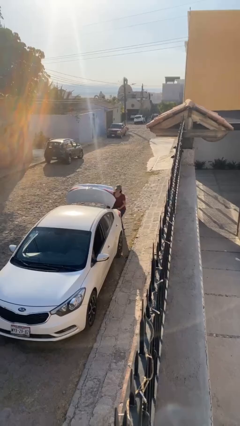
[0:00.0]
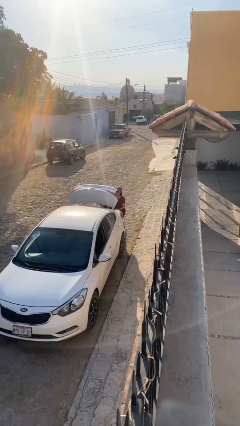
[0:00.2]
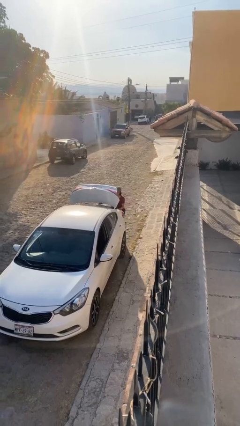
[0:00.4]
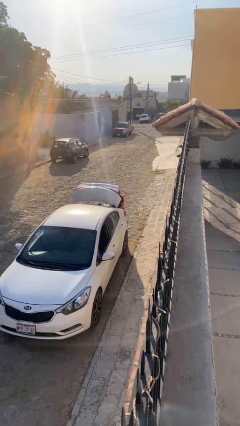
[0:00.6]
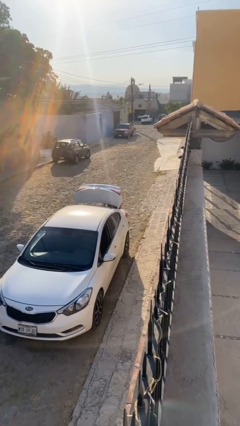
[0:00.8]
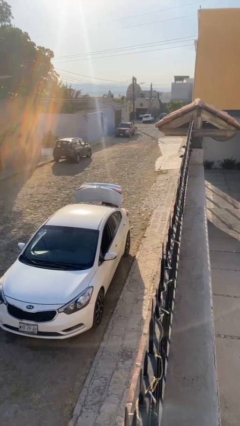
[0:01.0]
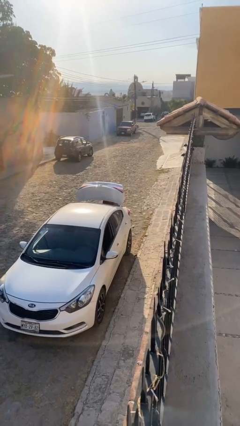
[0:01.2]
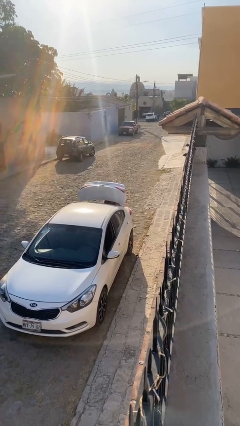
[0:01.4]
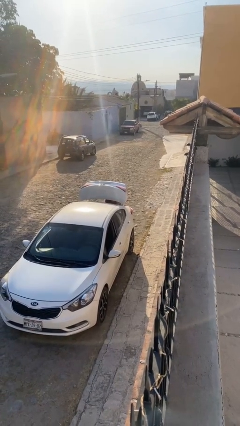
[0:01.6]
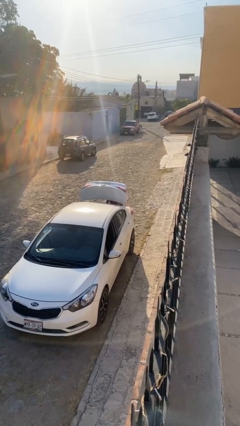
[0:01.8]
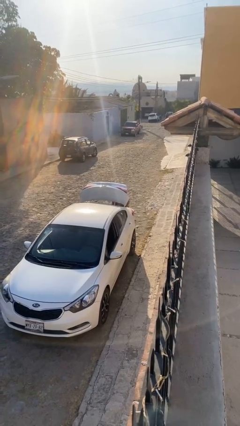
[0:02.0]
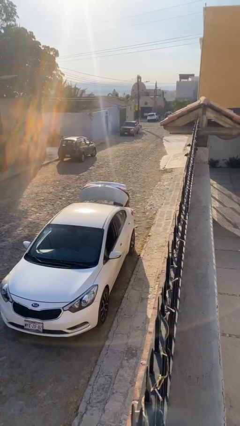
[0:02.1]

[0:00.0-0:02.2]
person loads car

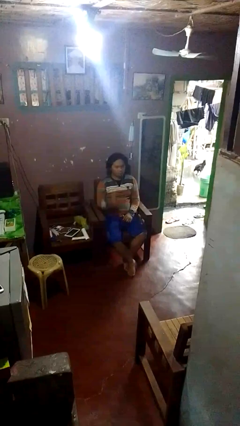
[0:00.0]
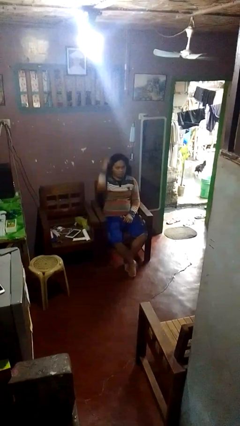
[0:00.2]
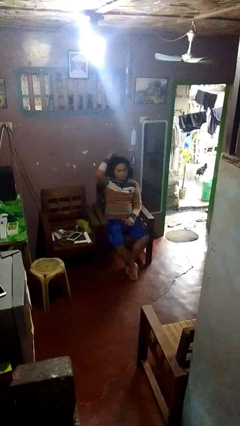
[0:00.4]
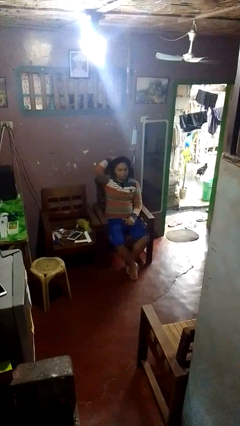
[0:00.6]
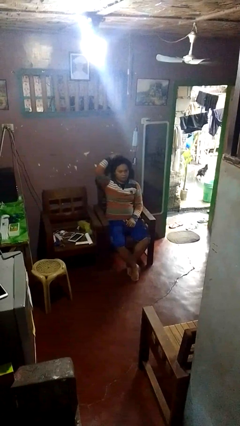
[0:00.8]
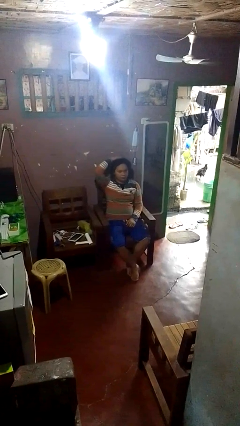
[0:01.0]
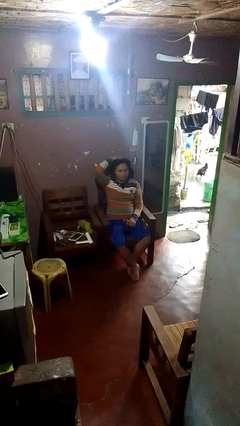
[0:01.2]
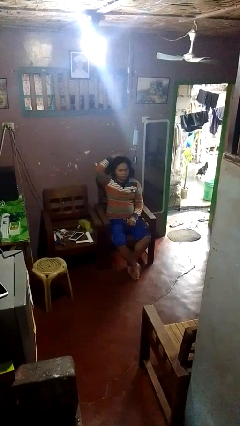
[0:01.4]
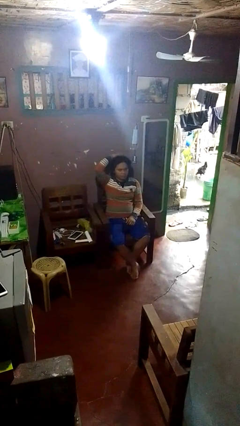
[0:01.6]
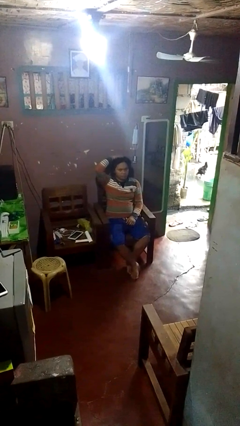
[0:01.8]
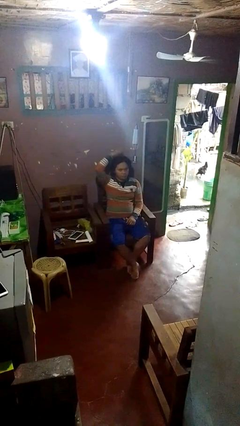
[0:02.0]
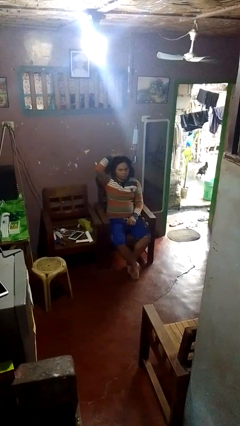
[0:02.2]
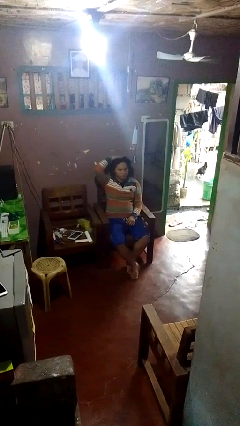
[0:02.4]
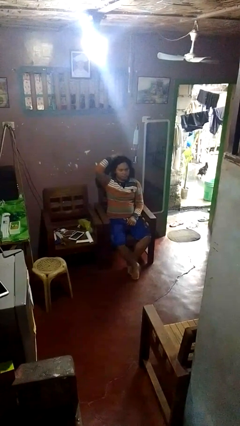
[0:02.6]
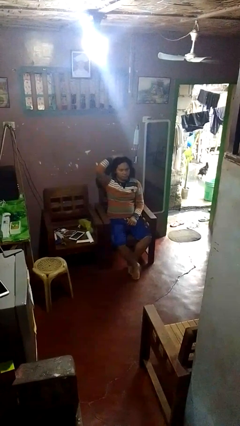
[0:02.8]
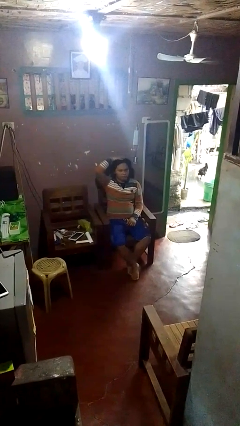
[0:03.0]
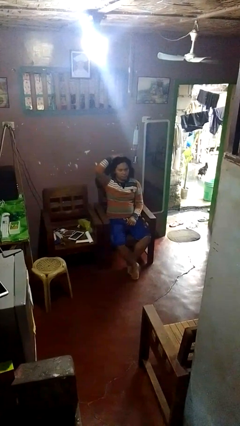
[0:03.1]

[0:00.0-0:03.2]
person pats head

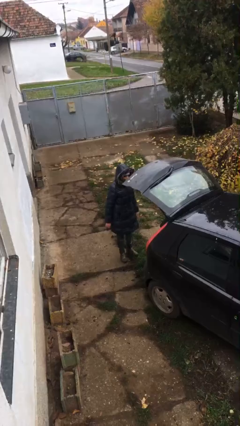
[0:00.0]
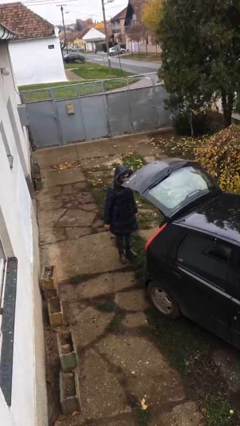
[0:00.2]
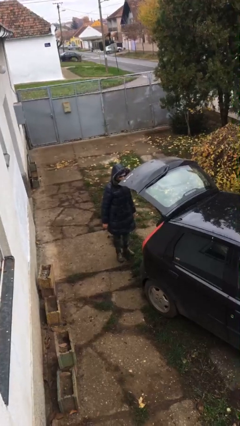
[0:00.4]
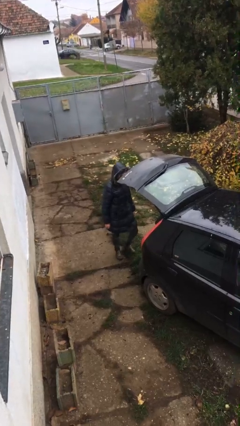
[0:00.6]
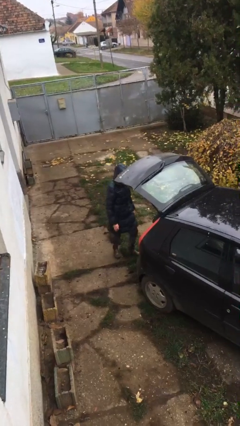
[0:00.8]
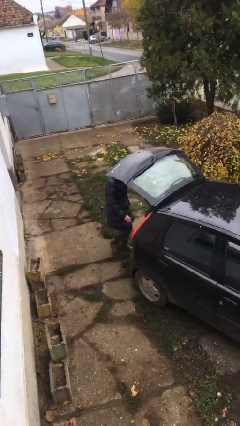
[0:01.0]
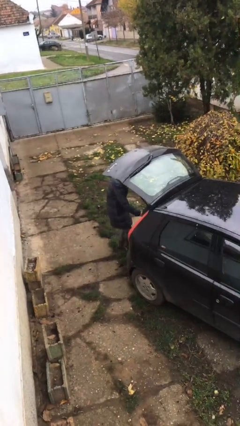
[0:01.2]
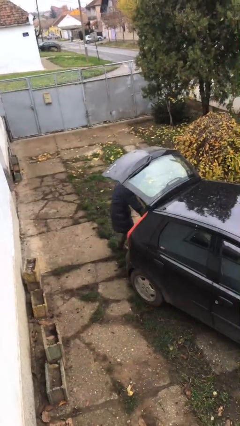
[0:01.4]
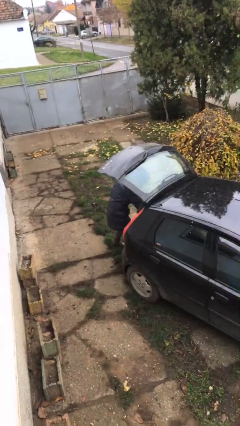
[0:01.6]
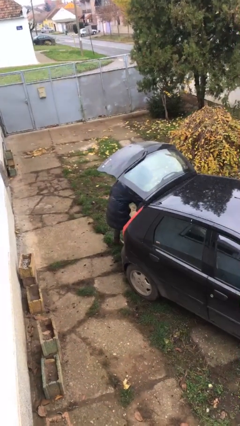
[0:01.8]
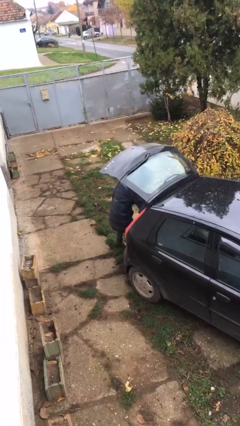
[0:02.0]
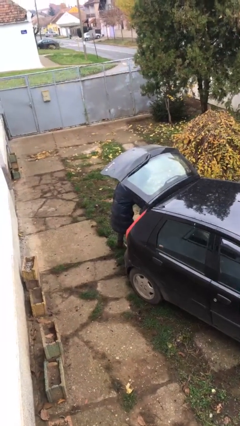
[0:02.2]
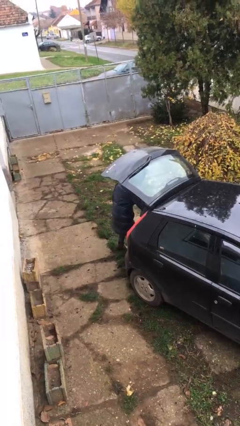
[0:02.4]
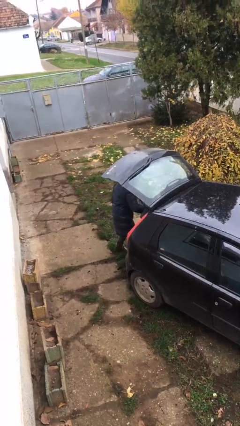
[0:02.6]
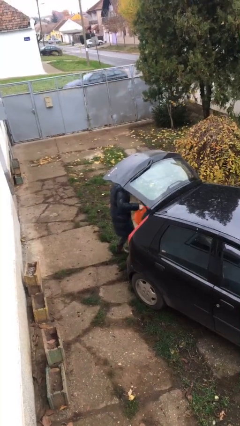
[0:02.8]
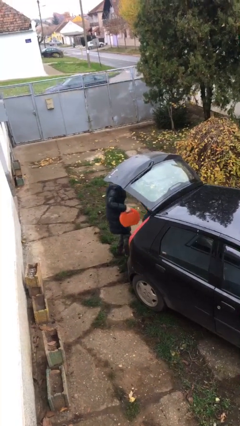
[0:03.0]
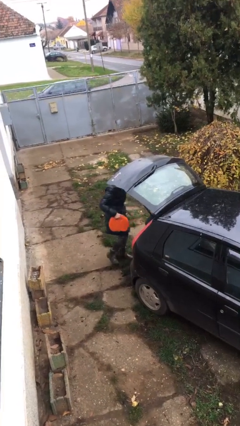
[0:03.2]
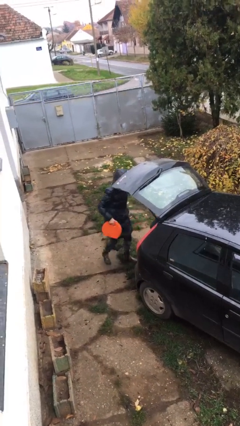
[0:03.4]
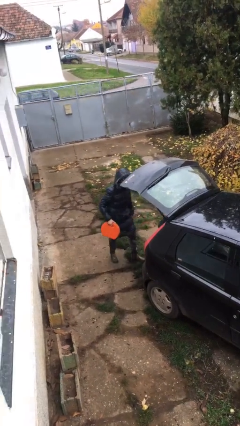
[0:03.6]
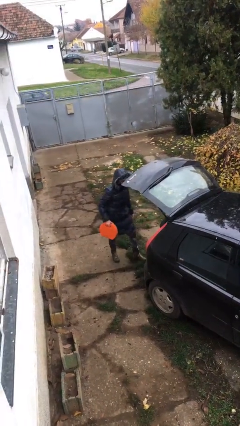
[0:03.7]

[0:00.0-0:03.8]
person unloads car

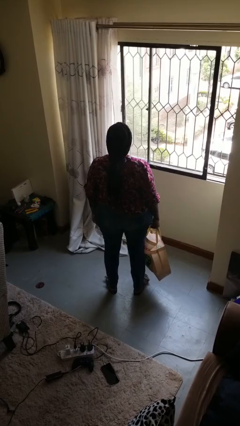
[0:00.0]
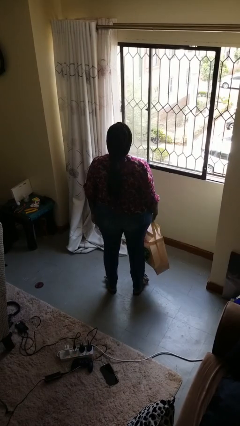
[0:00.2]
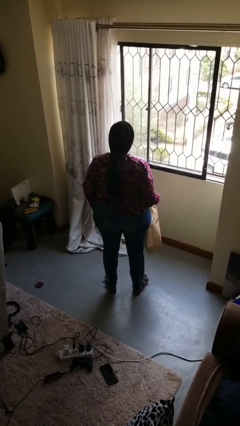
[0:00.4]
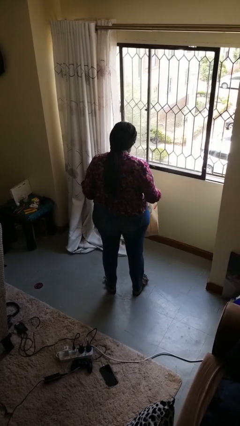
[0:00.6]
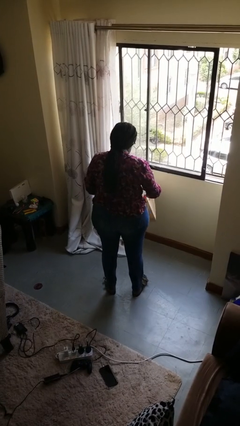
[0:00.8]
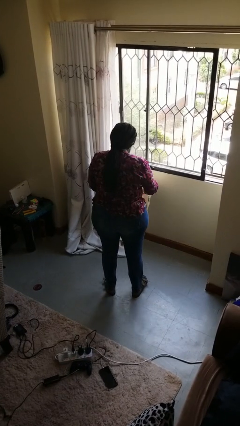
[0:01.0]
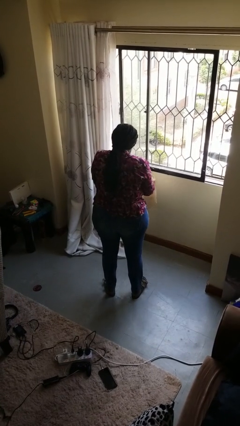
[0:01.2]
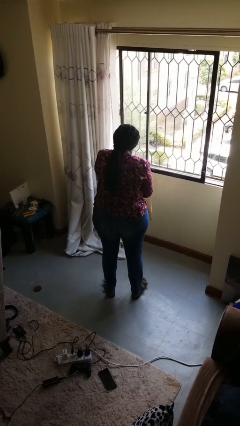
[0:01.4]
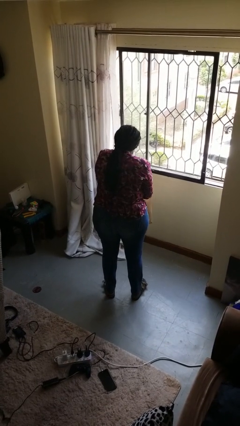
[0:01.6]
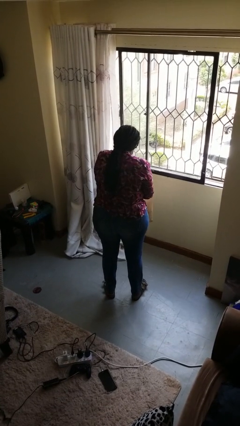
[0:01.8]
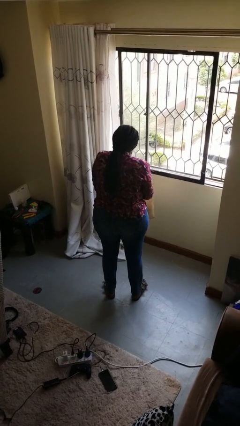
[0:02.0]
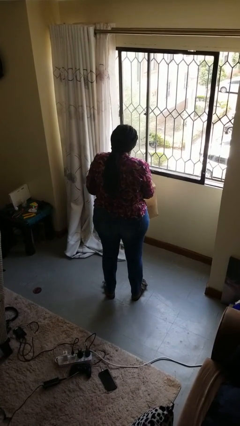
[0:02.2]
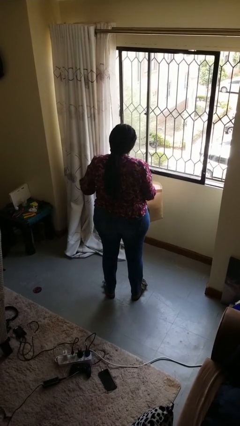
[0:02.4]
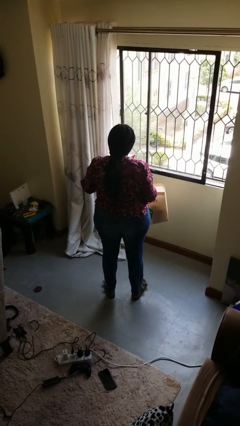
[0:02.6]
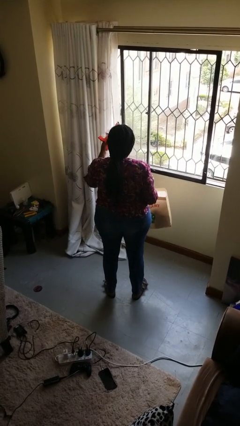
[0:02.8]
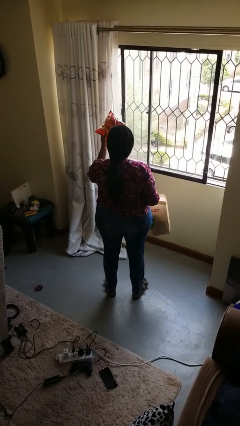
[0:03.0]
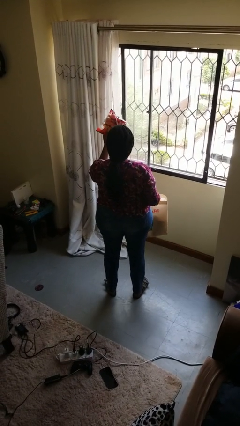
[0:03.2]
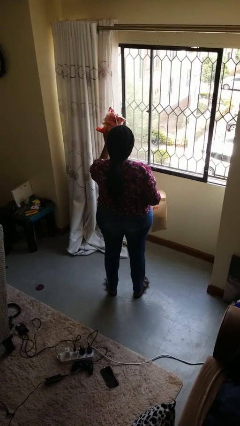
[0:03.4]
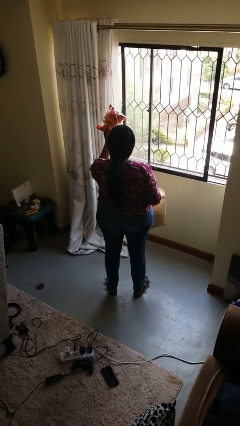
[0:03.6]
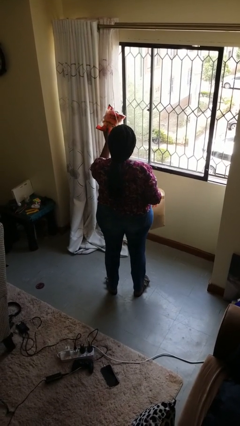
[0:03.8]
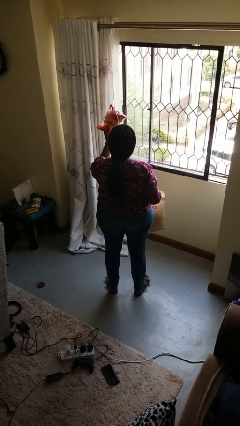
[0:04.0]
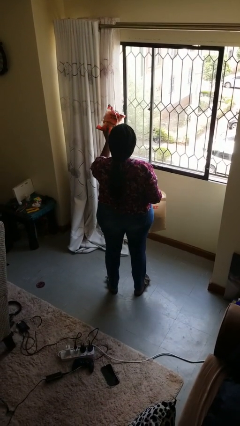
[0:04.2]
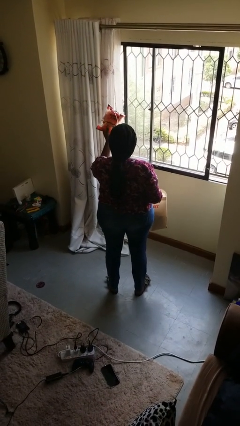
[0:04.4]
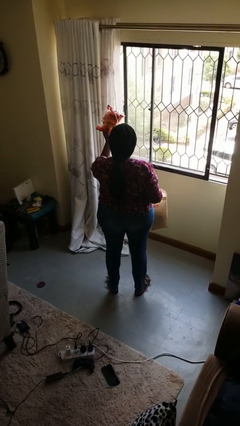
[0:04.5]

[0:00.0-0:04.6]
person takes object from bag

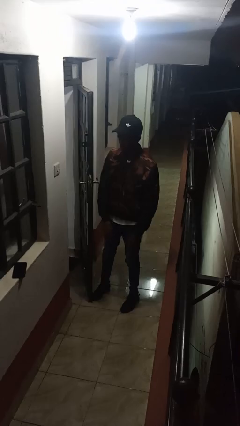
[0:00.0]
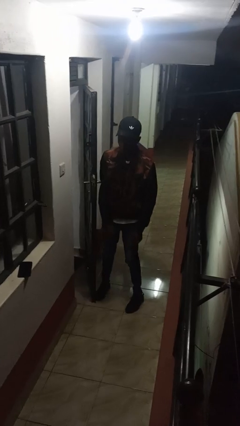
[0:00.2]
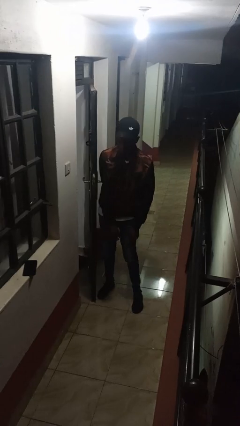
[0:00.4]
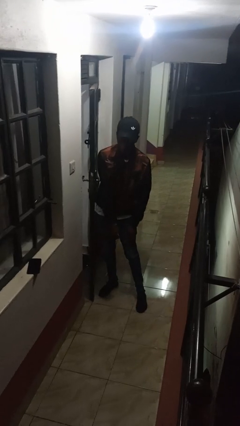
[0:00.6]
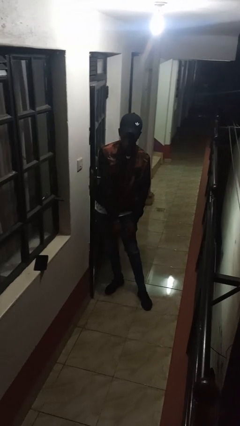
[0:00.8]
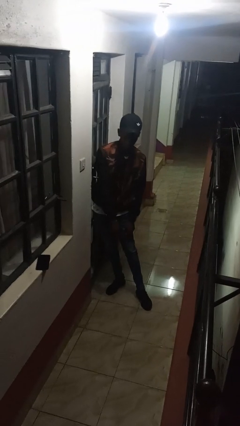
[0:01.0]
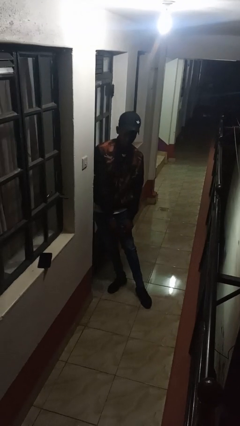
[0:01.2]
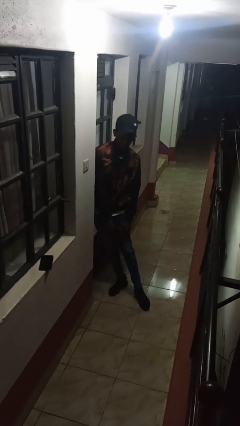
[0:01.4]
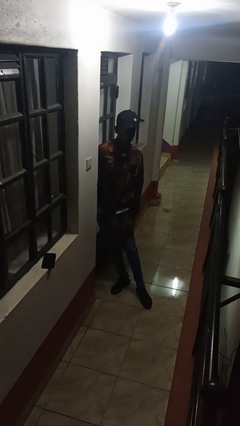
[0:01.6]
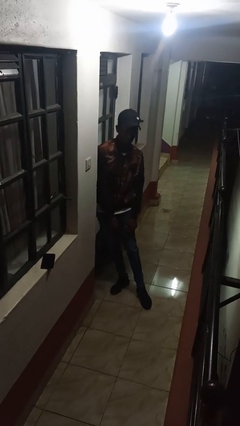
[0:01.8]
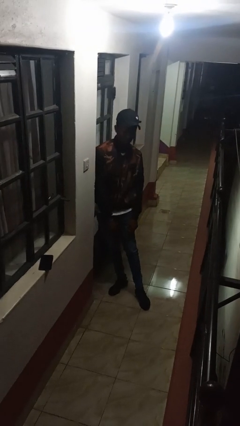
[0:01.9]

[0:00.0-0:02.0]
person closes door with hip

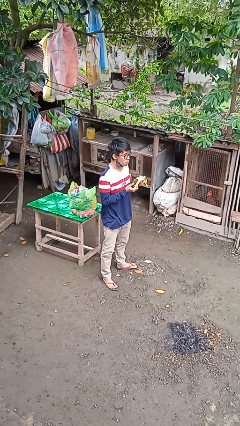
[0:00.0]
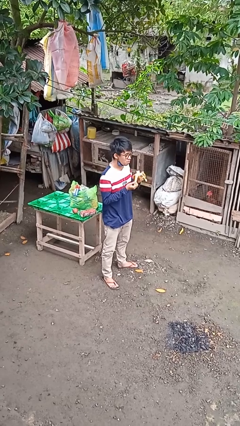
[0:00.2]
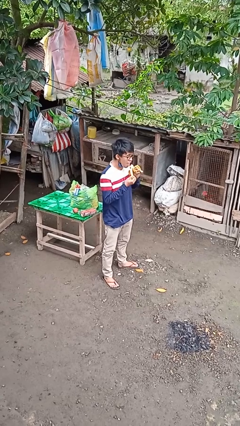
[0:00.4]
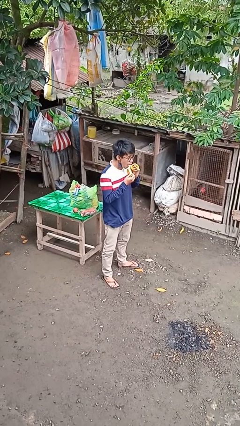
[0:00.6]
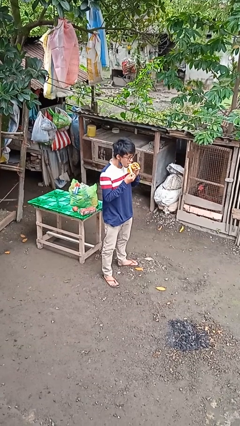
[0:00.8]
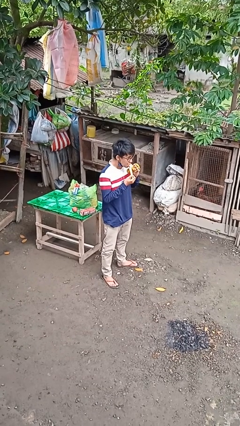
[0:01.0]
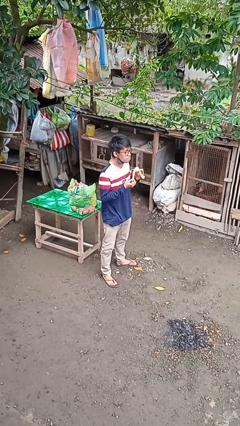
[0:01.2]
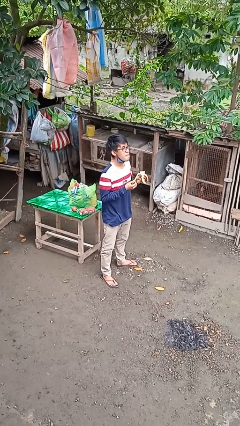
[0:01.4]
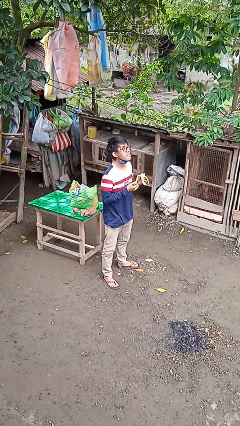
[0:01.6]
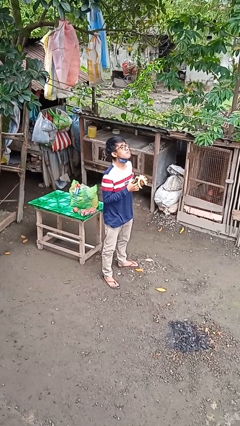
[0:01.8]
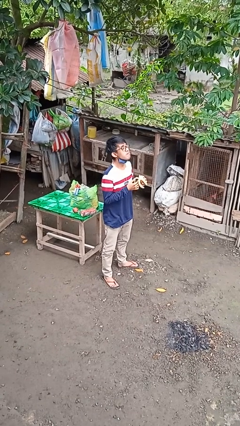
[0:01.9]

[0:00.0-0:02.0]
person eats banana
